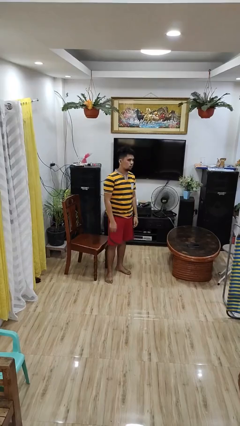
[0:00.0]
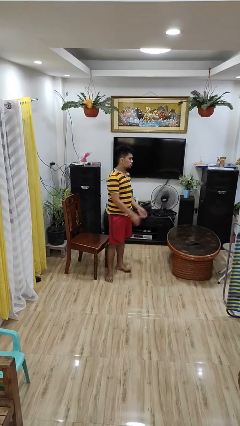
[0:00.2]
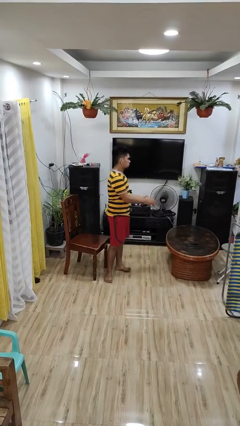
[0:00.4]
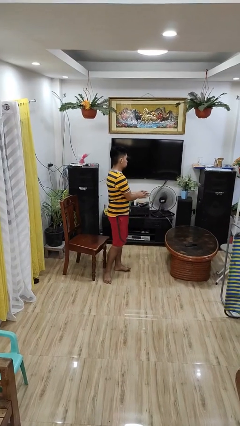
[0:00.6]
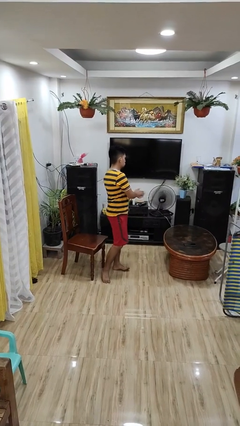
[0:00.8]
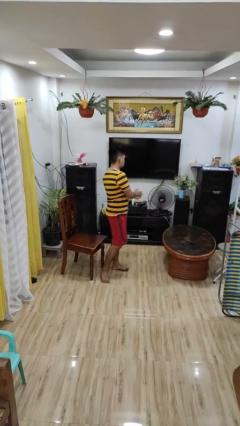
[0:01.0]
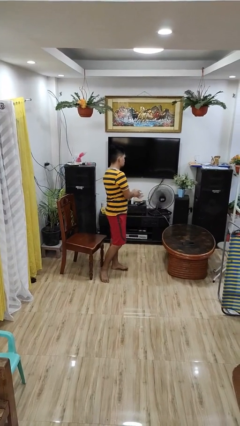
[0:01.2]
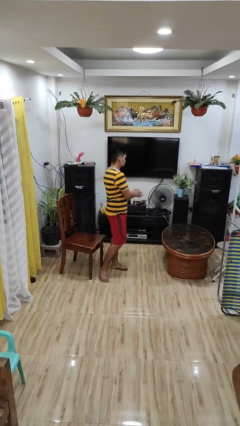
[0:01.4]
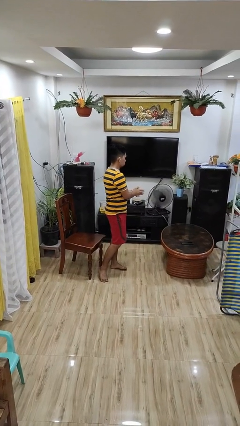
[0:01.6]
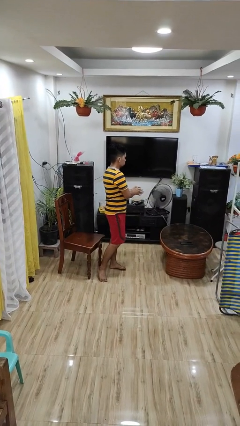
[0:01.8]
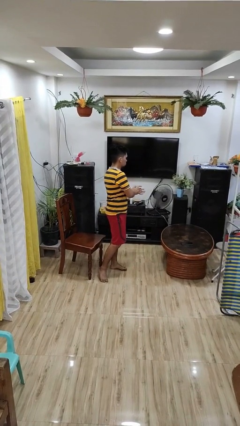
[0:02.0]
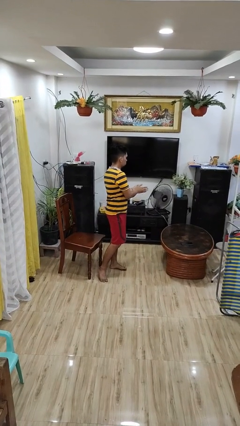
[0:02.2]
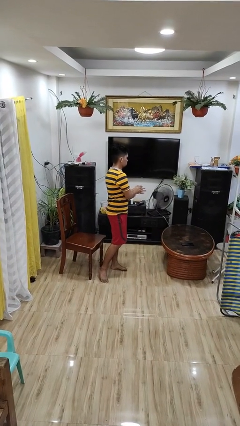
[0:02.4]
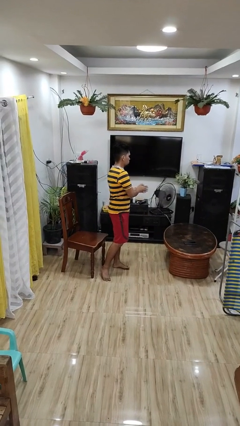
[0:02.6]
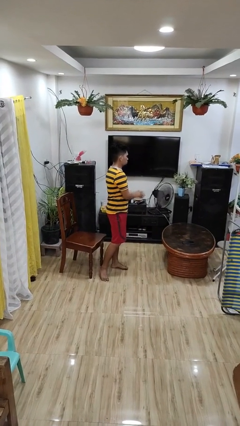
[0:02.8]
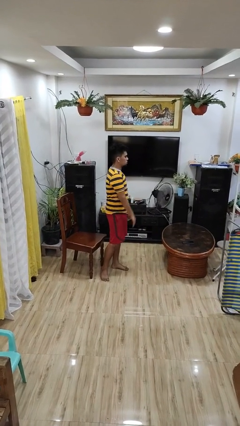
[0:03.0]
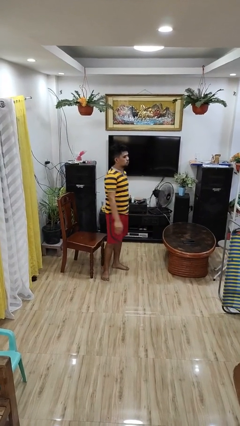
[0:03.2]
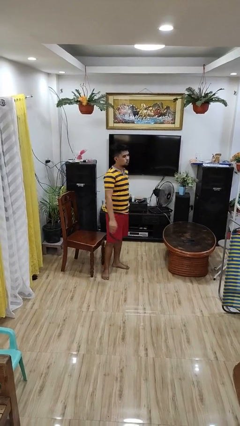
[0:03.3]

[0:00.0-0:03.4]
person claps hands

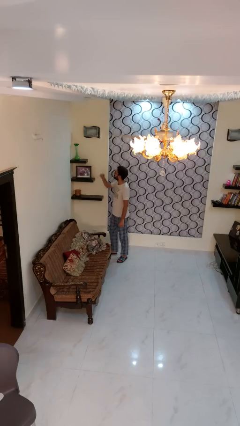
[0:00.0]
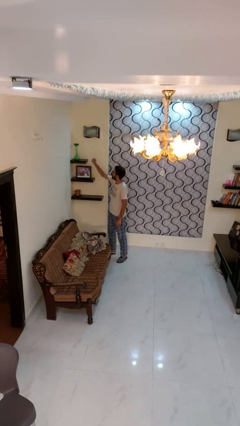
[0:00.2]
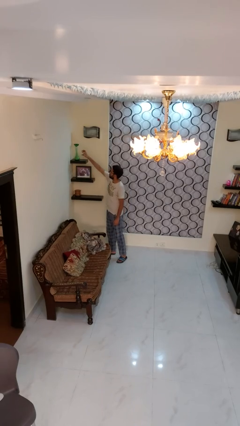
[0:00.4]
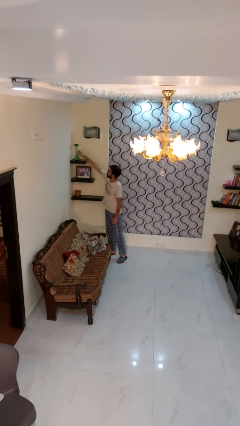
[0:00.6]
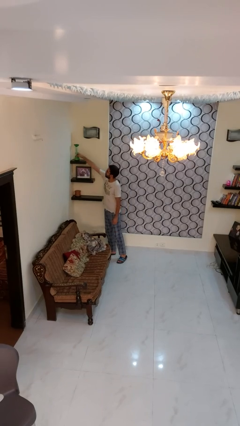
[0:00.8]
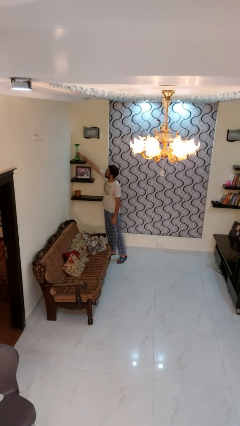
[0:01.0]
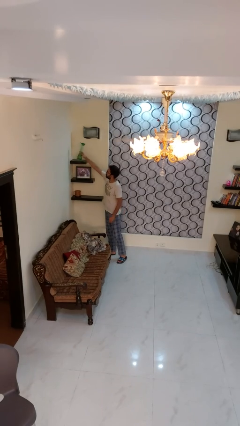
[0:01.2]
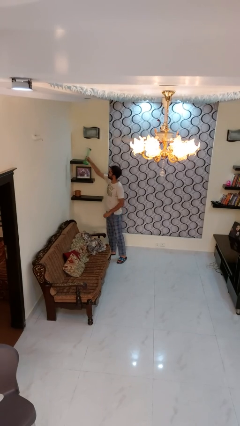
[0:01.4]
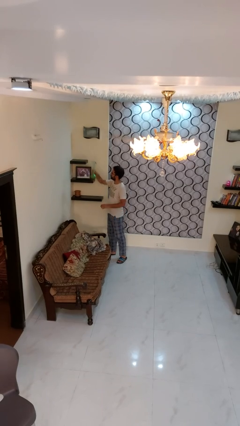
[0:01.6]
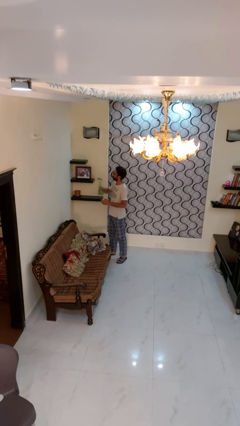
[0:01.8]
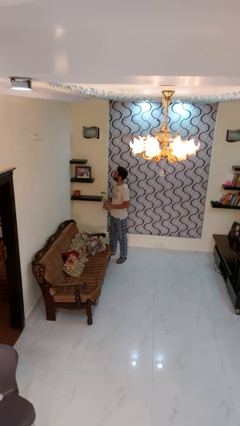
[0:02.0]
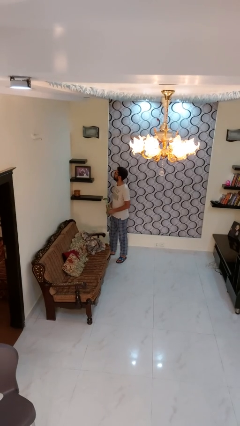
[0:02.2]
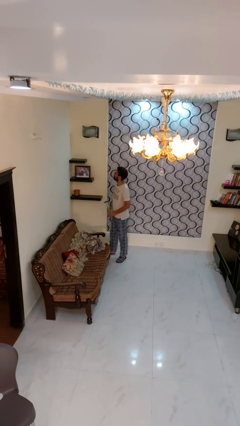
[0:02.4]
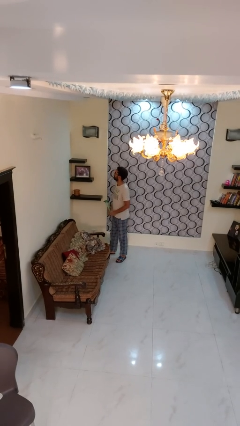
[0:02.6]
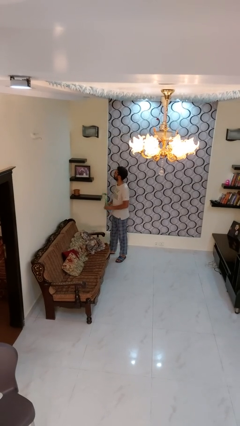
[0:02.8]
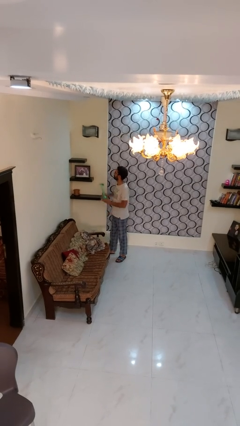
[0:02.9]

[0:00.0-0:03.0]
person picks up object from shelf

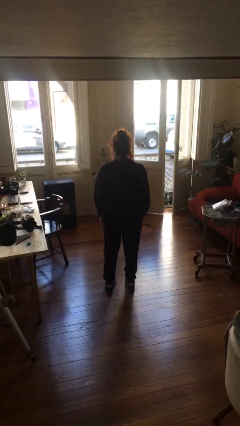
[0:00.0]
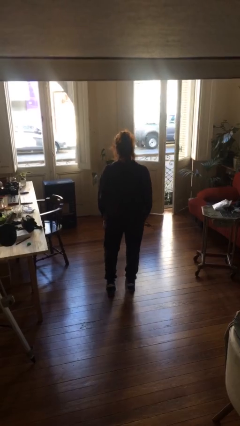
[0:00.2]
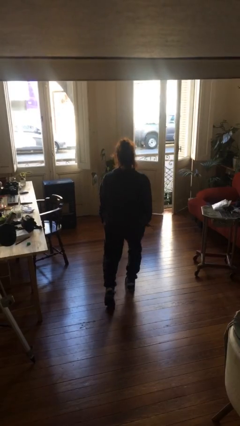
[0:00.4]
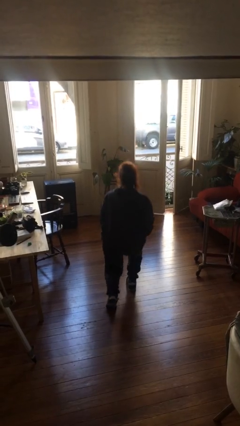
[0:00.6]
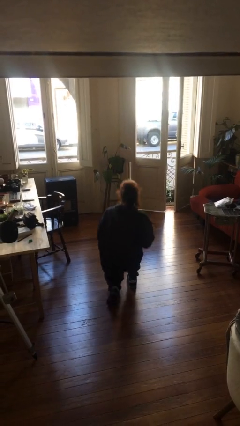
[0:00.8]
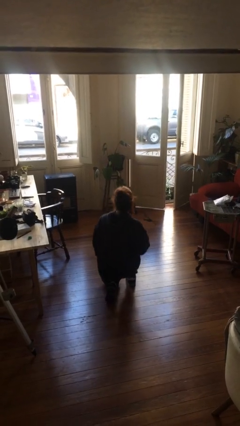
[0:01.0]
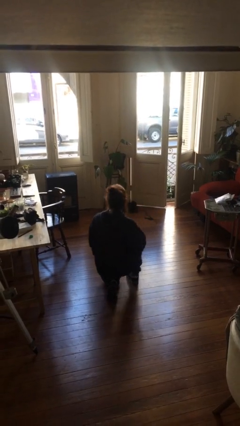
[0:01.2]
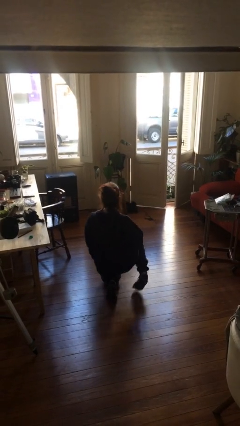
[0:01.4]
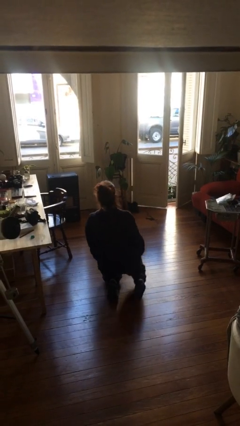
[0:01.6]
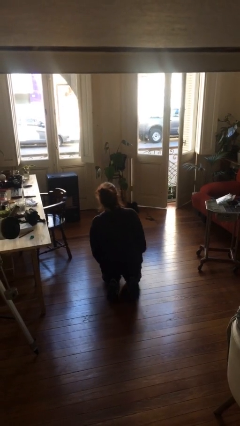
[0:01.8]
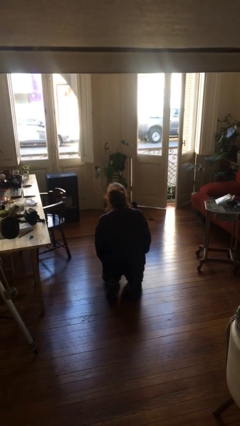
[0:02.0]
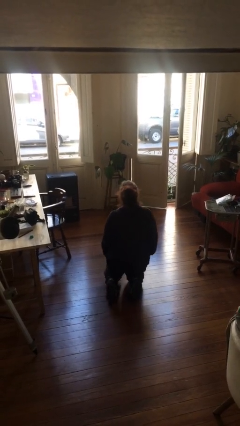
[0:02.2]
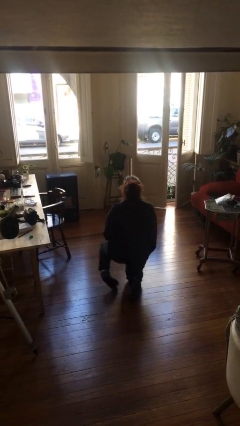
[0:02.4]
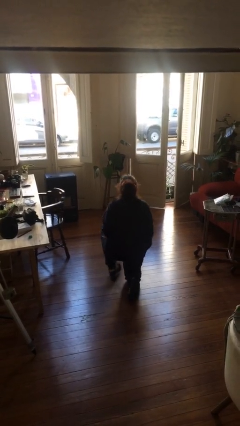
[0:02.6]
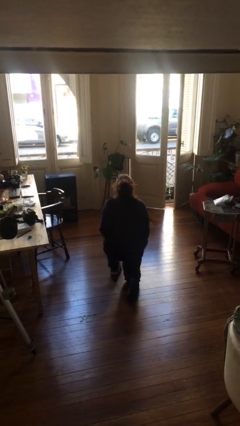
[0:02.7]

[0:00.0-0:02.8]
person kneels

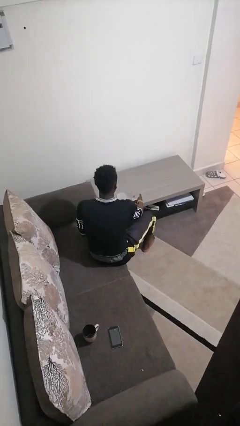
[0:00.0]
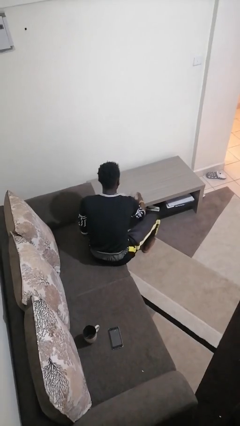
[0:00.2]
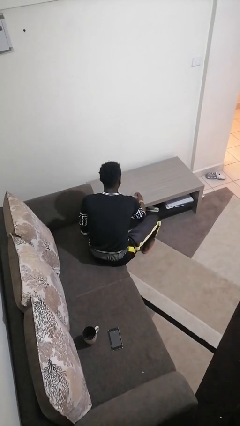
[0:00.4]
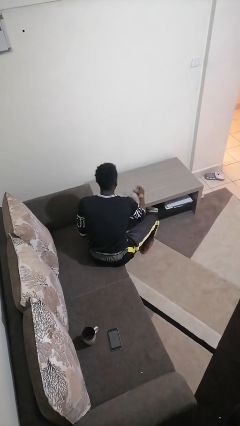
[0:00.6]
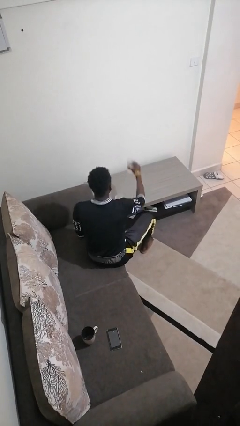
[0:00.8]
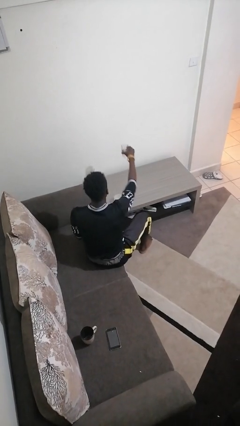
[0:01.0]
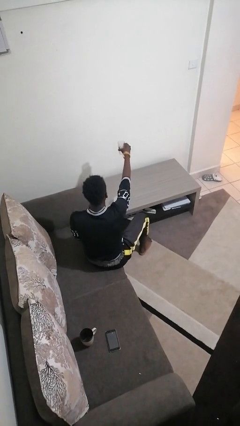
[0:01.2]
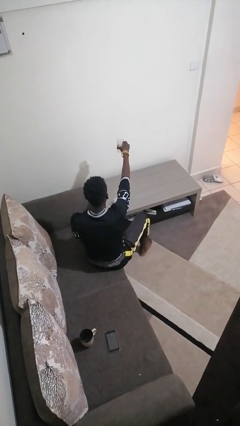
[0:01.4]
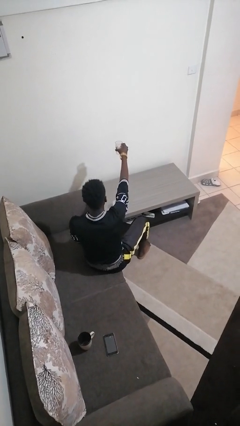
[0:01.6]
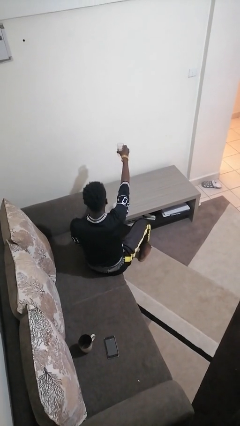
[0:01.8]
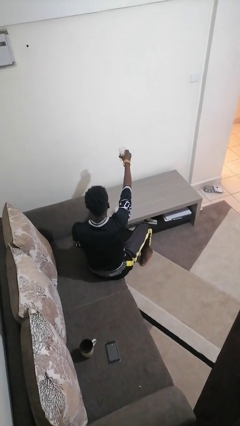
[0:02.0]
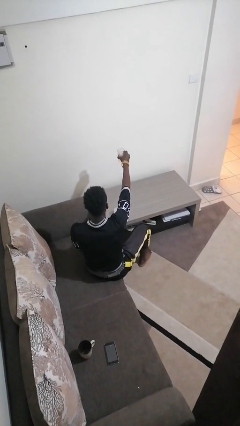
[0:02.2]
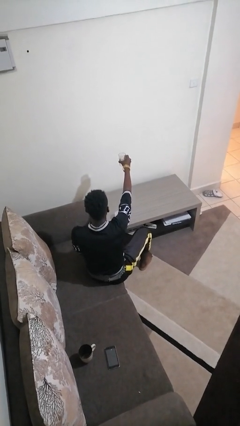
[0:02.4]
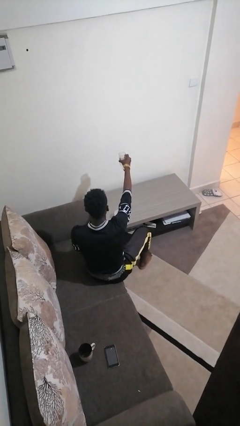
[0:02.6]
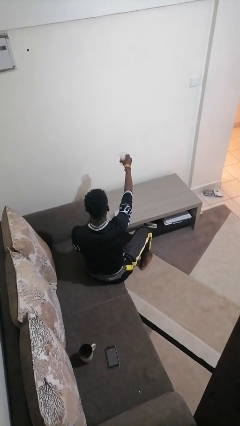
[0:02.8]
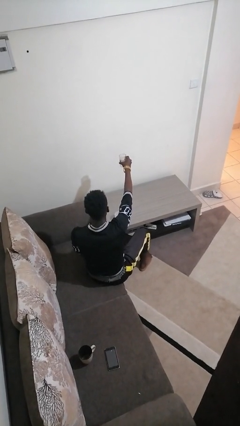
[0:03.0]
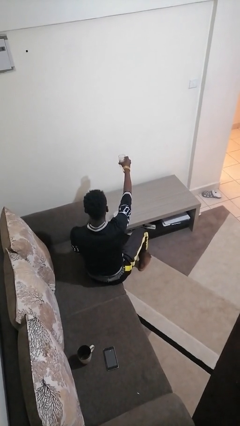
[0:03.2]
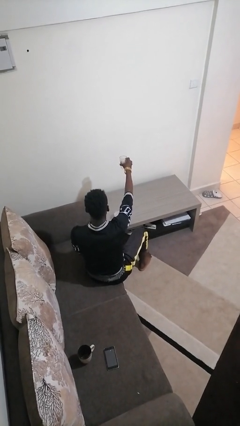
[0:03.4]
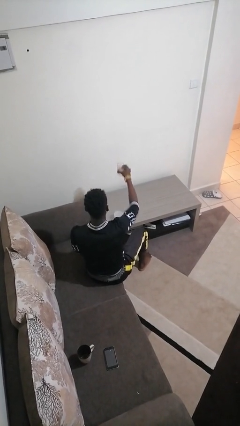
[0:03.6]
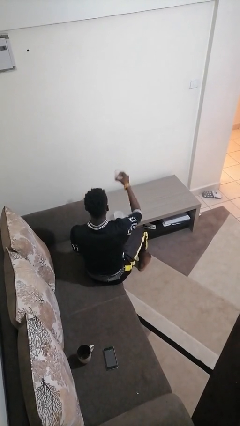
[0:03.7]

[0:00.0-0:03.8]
person picks up object from table

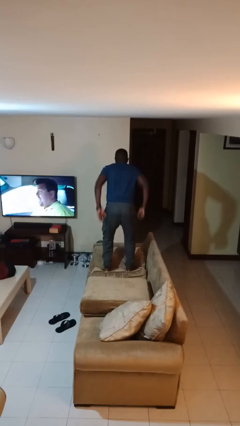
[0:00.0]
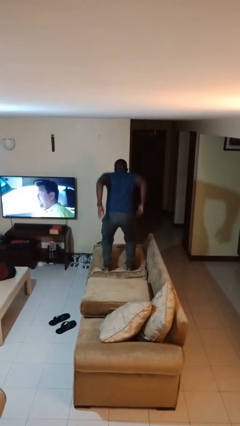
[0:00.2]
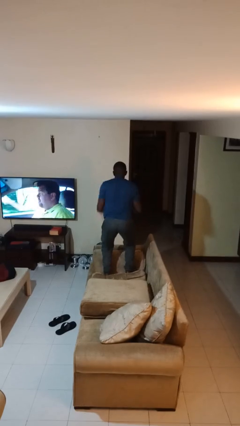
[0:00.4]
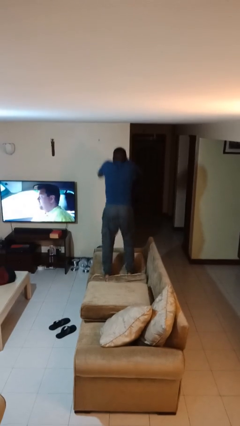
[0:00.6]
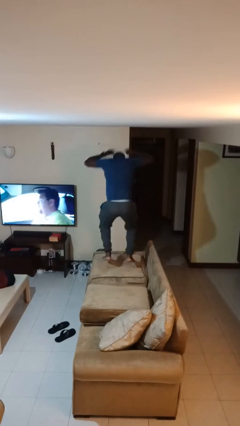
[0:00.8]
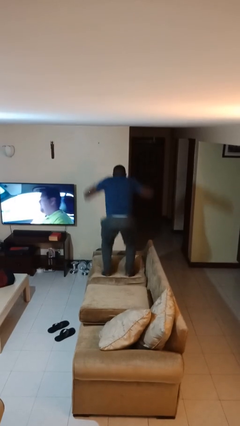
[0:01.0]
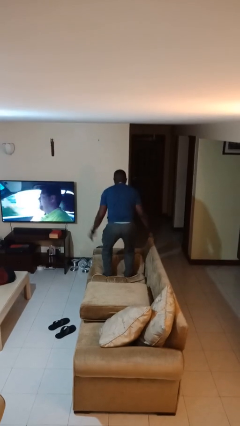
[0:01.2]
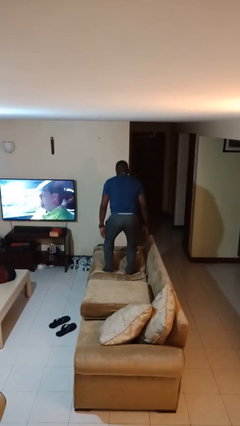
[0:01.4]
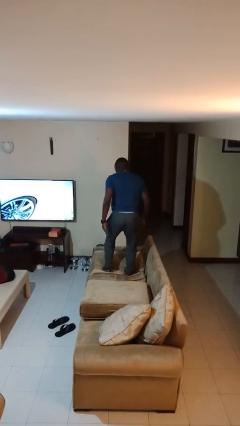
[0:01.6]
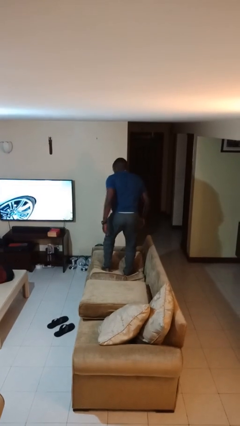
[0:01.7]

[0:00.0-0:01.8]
person jumps on couch

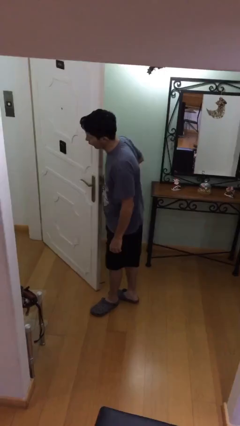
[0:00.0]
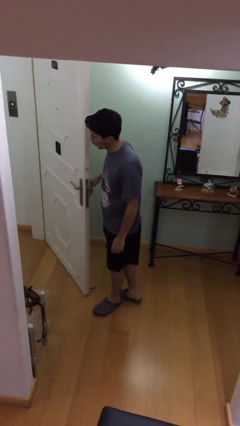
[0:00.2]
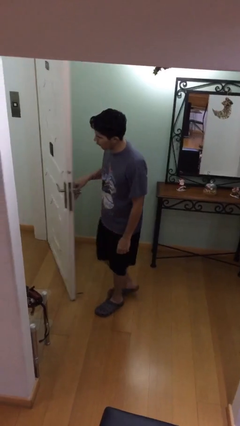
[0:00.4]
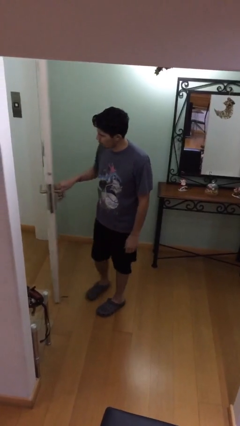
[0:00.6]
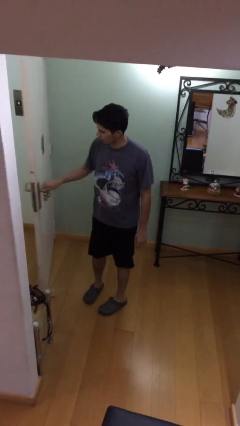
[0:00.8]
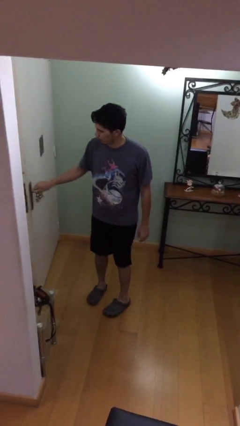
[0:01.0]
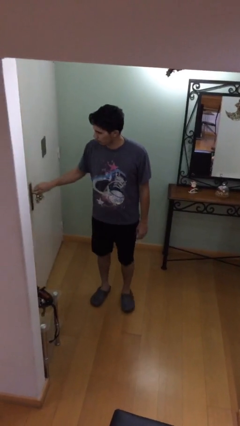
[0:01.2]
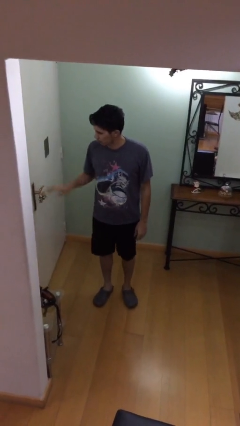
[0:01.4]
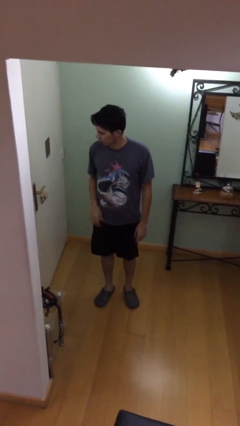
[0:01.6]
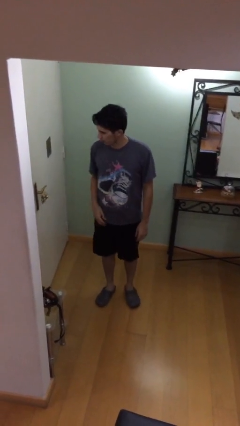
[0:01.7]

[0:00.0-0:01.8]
person closes facility door

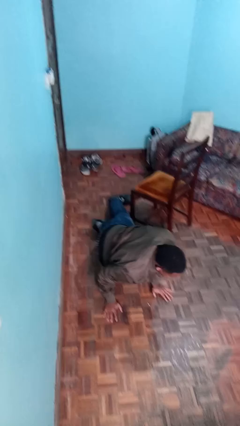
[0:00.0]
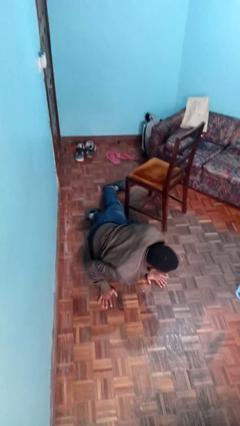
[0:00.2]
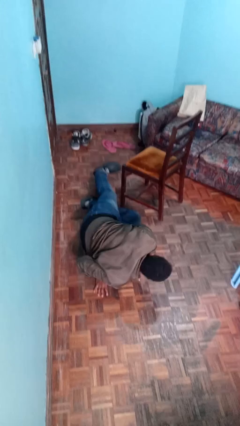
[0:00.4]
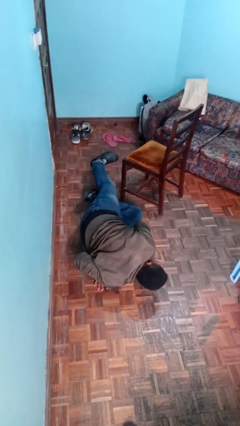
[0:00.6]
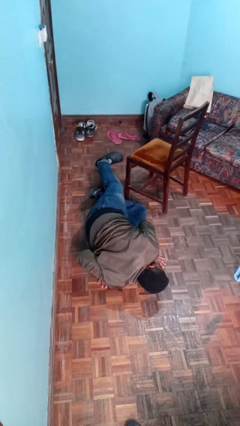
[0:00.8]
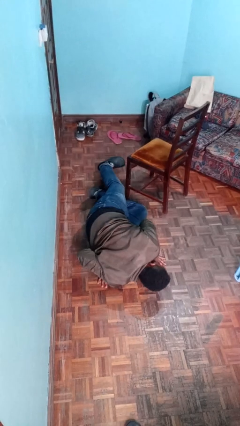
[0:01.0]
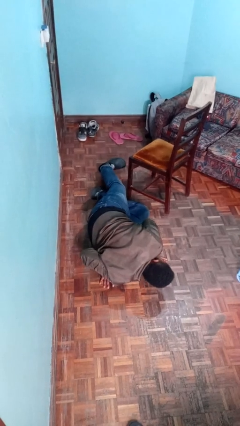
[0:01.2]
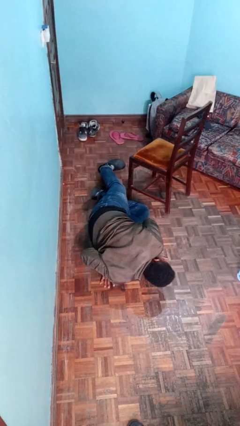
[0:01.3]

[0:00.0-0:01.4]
person lies down on floor
